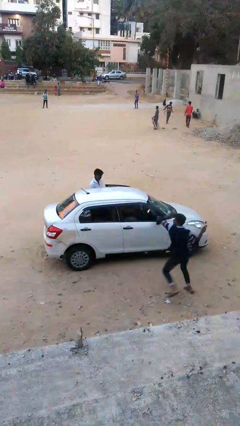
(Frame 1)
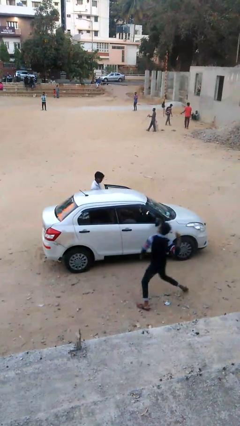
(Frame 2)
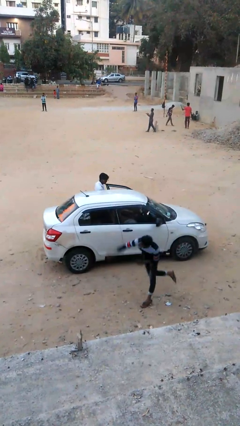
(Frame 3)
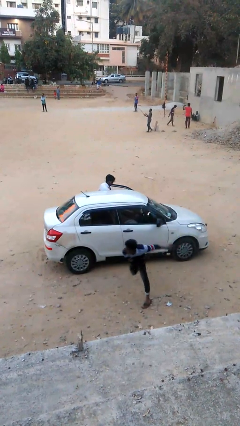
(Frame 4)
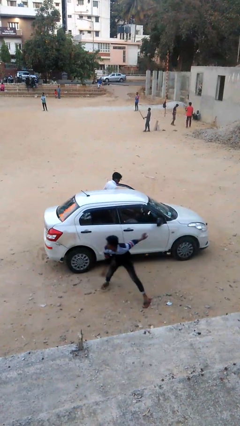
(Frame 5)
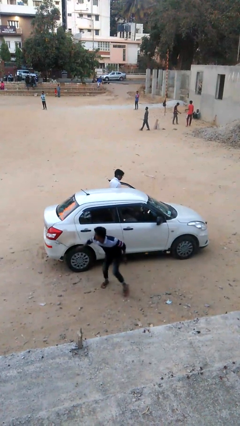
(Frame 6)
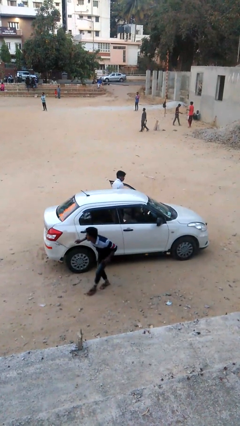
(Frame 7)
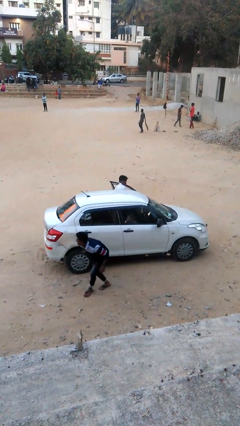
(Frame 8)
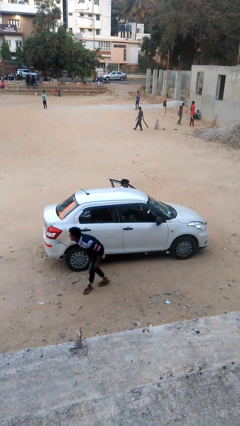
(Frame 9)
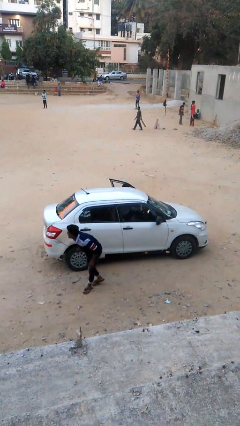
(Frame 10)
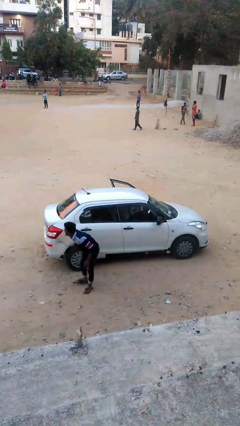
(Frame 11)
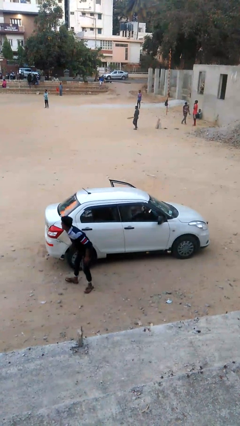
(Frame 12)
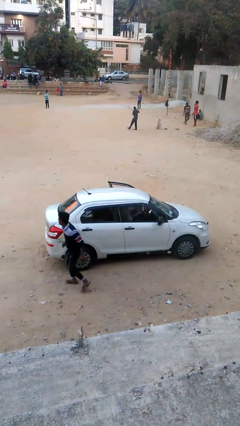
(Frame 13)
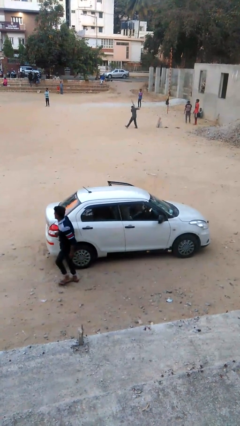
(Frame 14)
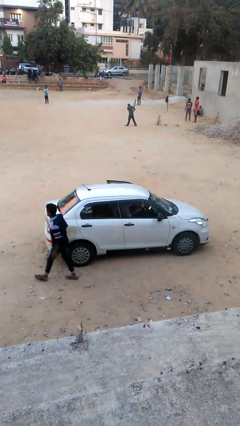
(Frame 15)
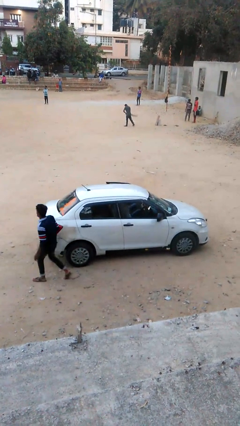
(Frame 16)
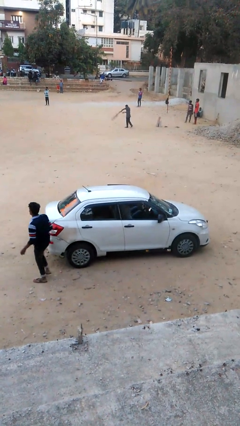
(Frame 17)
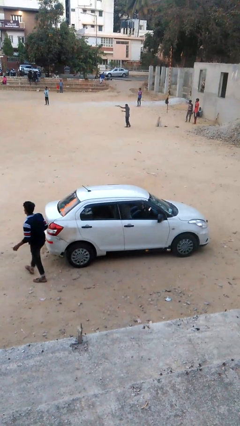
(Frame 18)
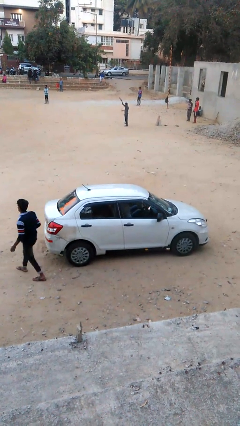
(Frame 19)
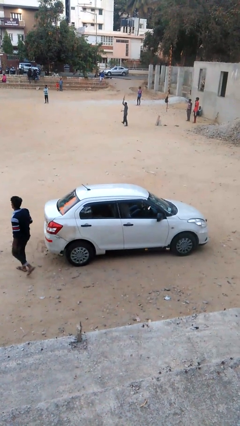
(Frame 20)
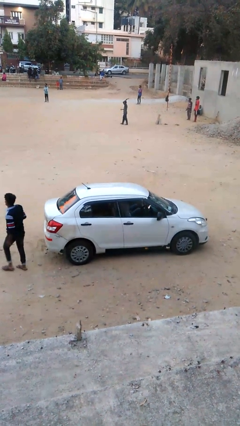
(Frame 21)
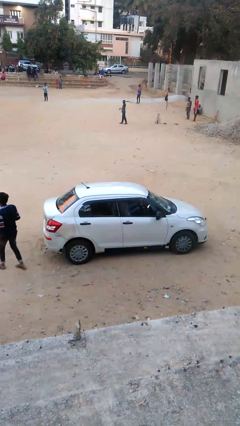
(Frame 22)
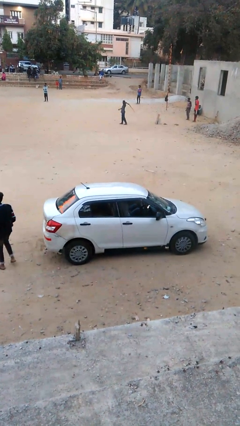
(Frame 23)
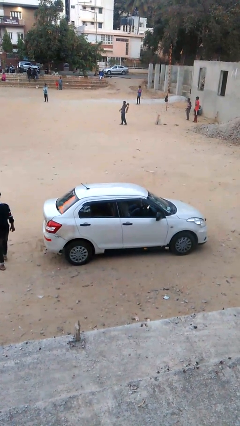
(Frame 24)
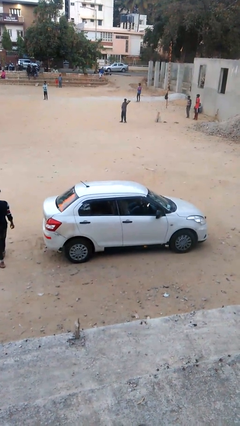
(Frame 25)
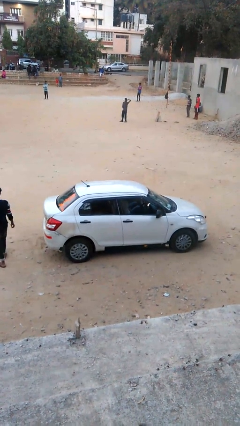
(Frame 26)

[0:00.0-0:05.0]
car picks up person

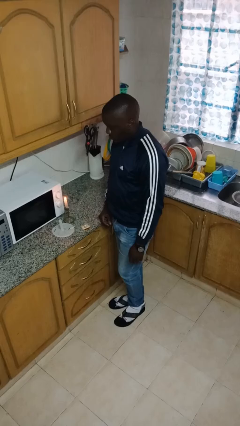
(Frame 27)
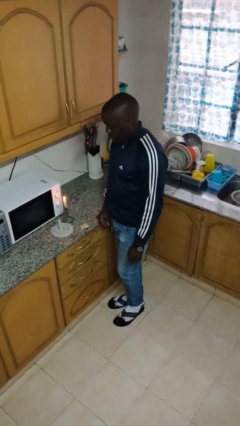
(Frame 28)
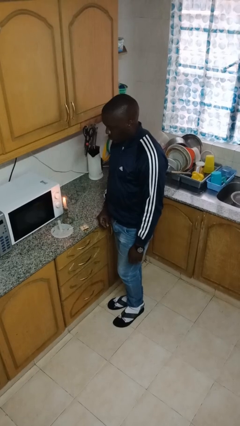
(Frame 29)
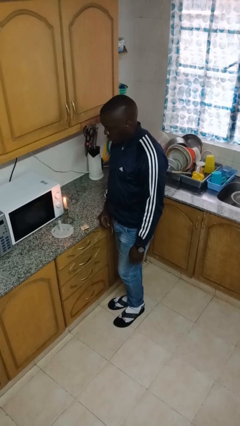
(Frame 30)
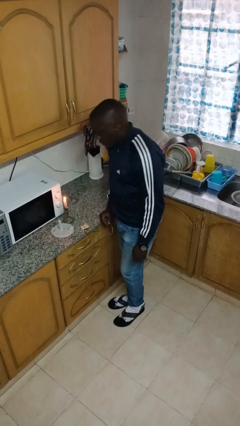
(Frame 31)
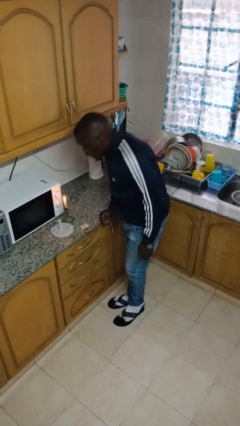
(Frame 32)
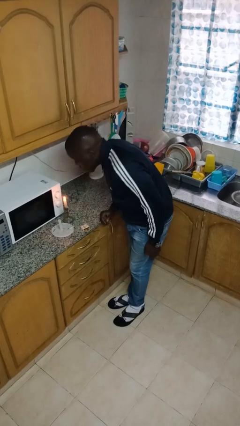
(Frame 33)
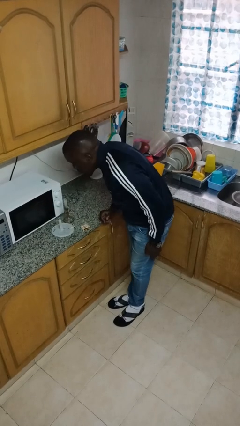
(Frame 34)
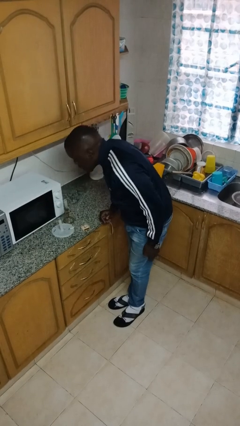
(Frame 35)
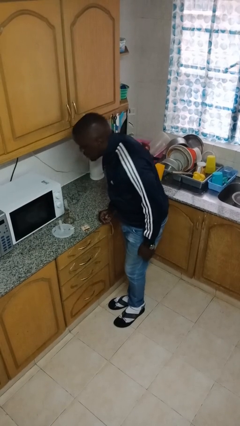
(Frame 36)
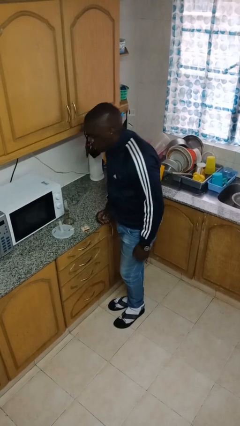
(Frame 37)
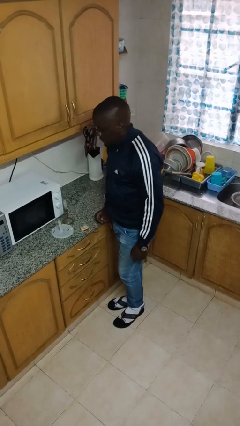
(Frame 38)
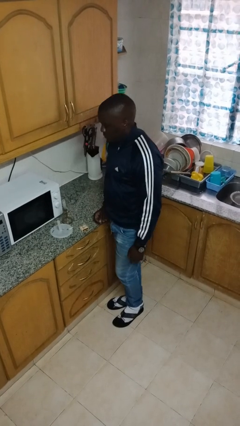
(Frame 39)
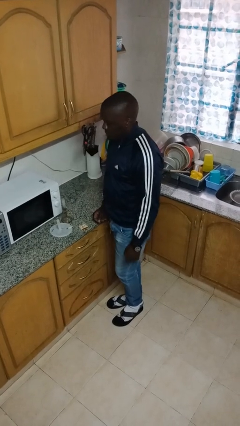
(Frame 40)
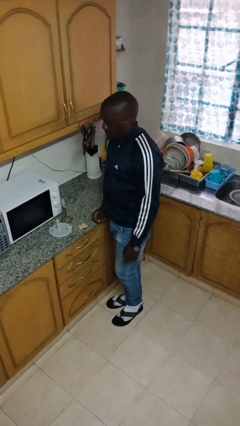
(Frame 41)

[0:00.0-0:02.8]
person extinguishes candle

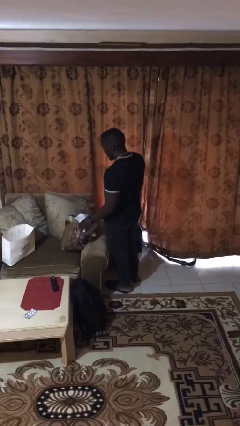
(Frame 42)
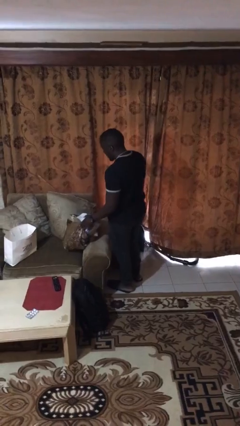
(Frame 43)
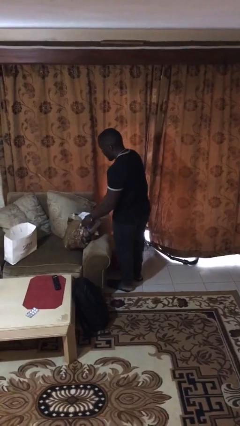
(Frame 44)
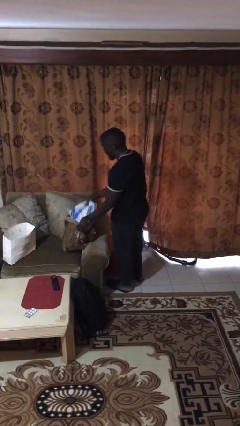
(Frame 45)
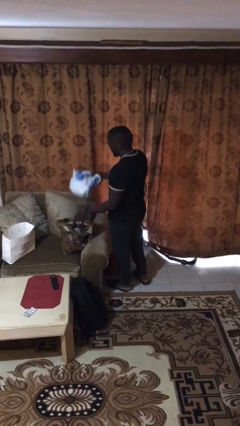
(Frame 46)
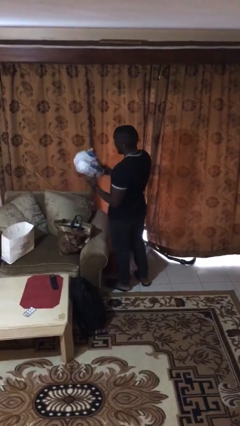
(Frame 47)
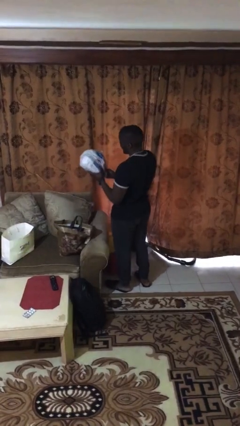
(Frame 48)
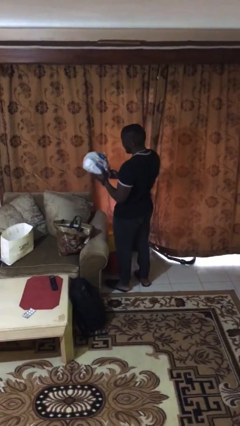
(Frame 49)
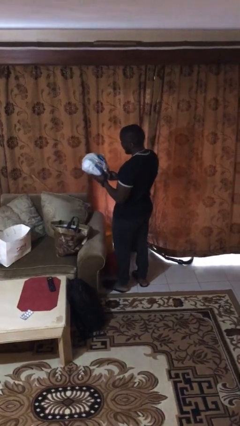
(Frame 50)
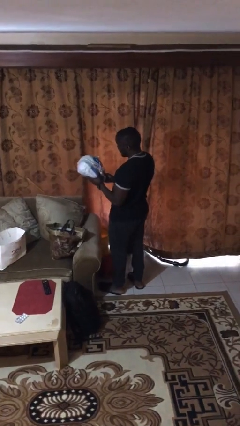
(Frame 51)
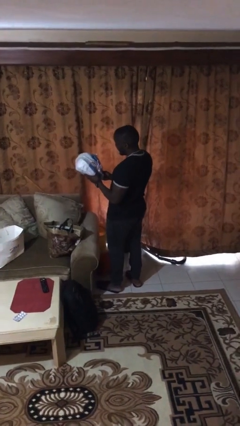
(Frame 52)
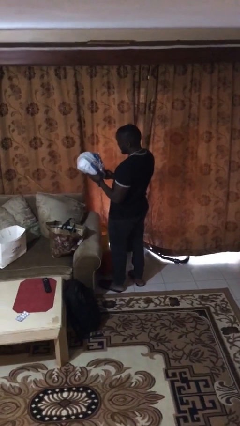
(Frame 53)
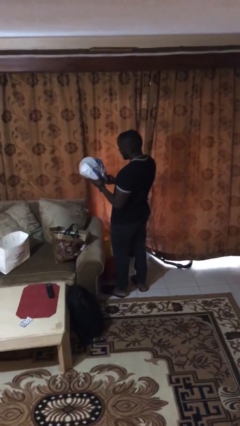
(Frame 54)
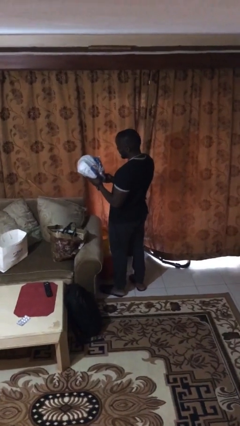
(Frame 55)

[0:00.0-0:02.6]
person takes object from bag

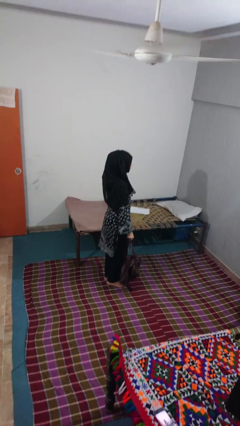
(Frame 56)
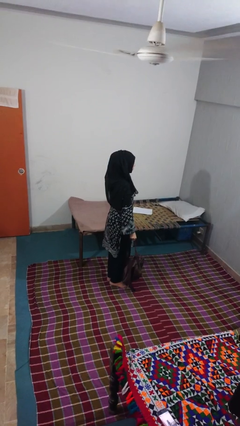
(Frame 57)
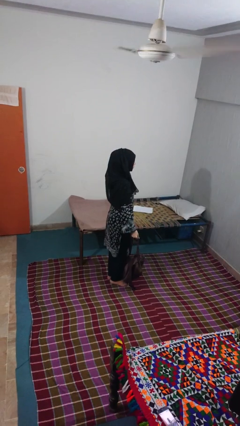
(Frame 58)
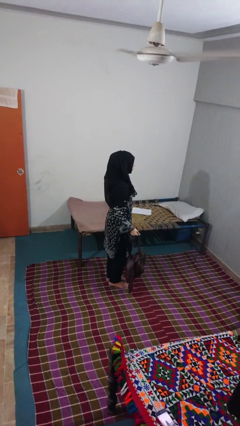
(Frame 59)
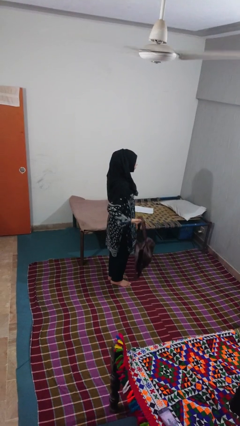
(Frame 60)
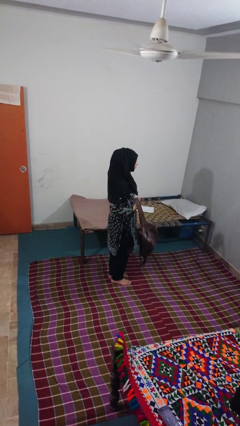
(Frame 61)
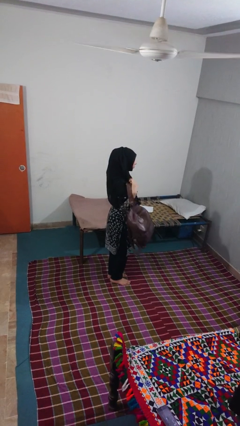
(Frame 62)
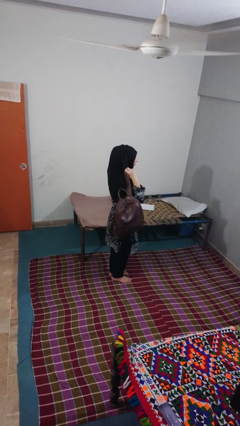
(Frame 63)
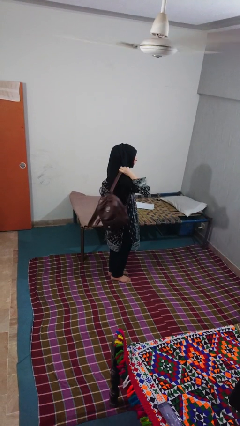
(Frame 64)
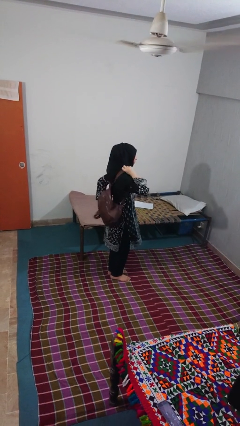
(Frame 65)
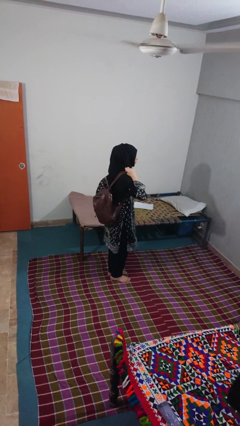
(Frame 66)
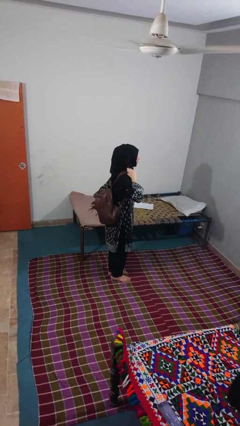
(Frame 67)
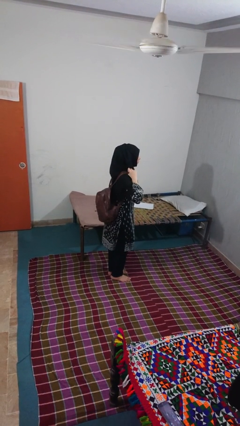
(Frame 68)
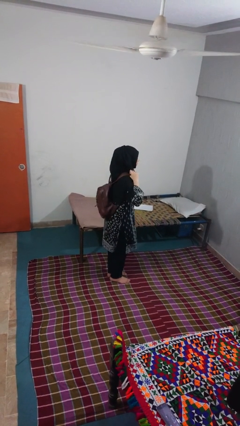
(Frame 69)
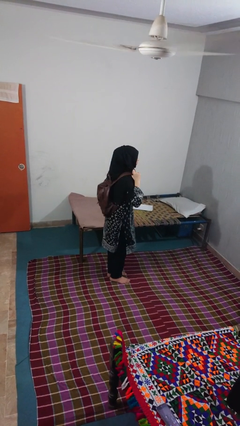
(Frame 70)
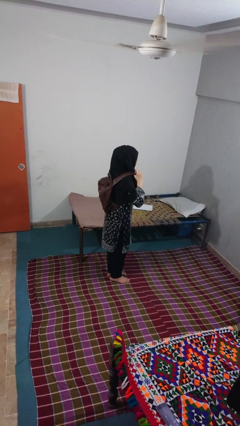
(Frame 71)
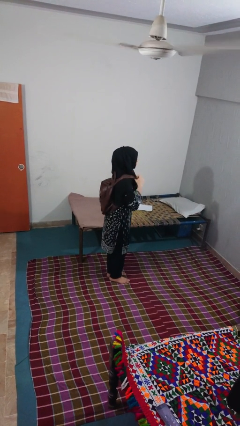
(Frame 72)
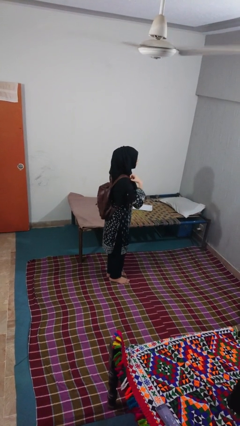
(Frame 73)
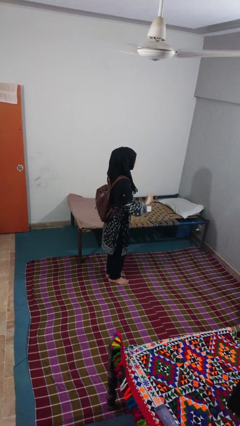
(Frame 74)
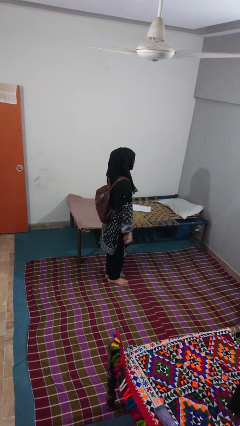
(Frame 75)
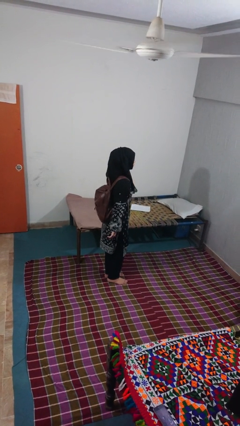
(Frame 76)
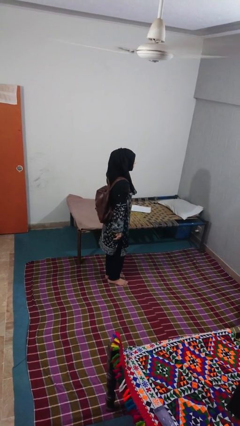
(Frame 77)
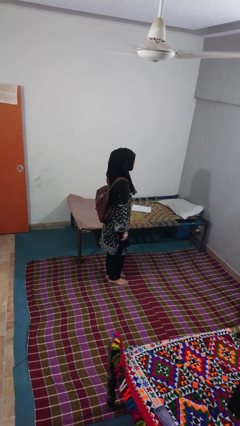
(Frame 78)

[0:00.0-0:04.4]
person puts on backpack

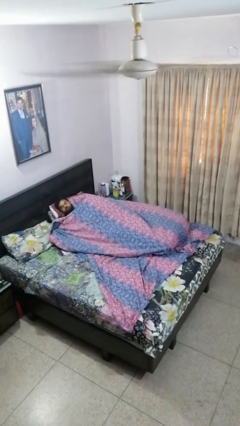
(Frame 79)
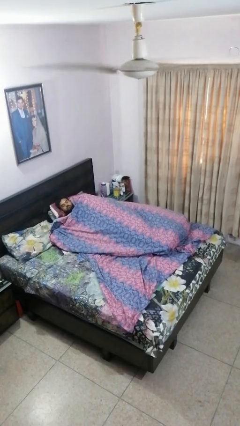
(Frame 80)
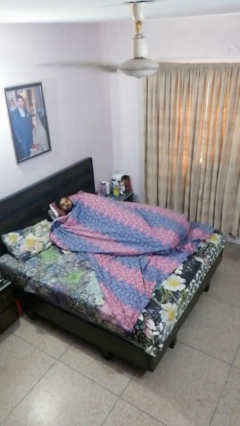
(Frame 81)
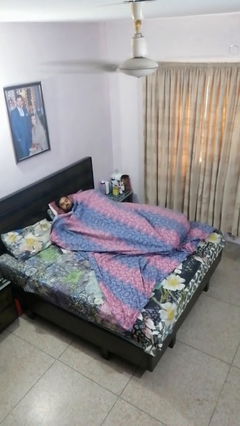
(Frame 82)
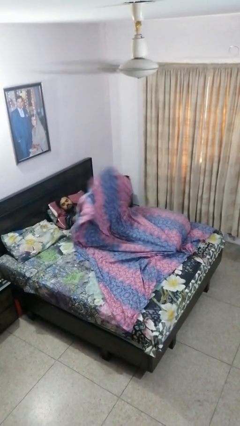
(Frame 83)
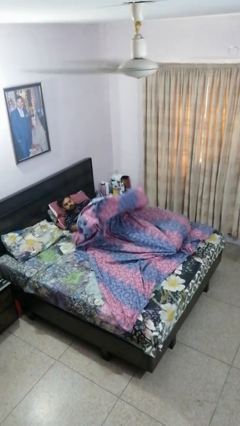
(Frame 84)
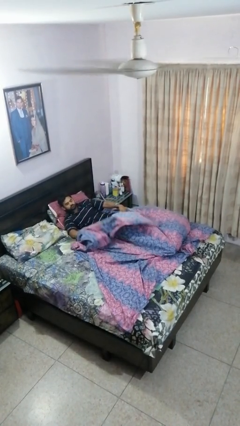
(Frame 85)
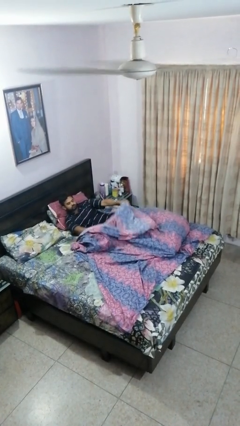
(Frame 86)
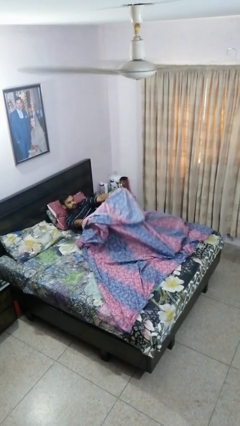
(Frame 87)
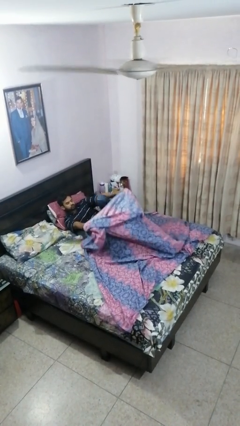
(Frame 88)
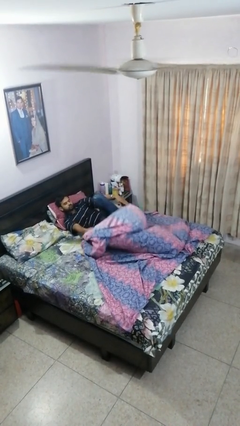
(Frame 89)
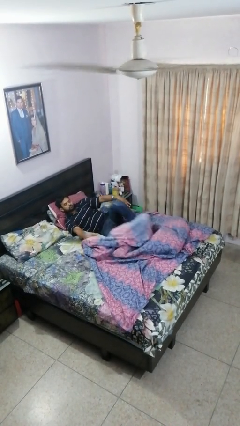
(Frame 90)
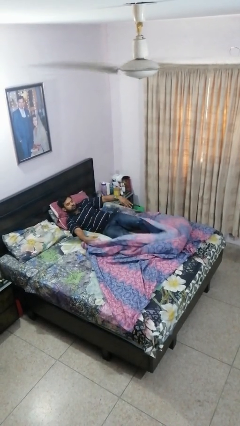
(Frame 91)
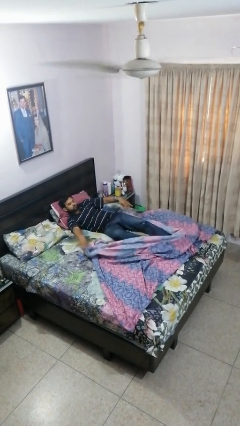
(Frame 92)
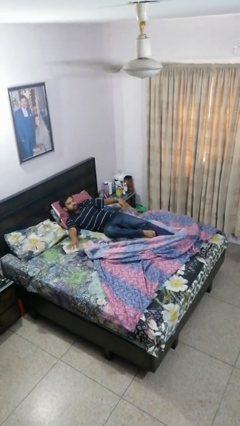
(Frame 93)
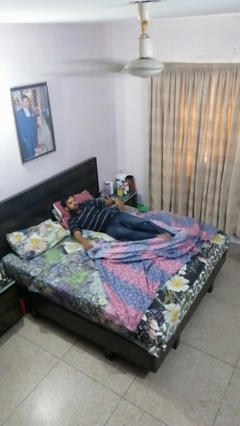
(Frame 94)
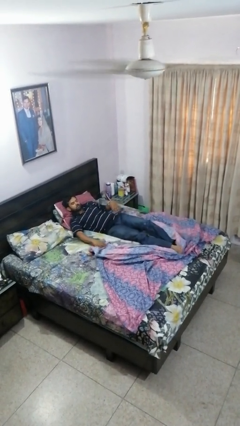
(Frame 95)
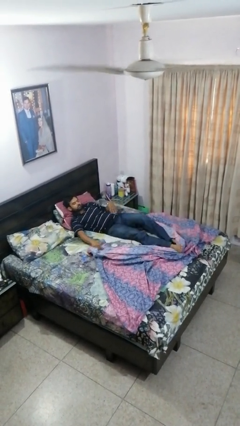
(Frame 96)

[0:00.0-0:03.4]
person uncovers with bedsheets
